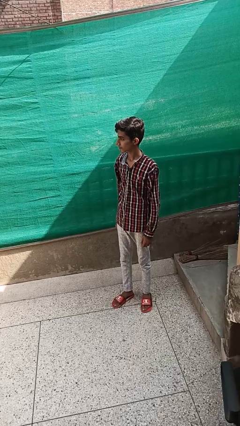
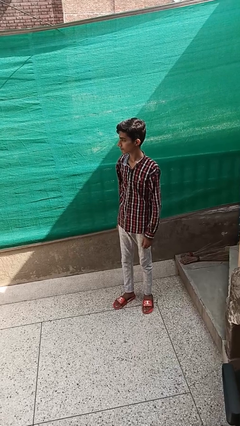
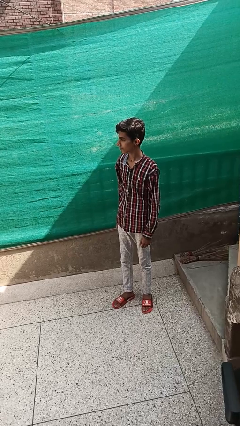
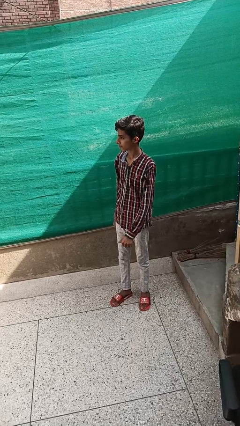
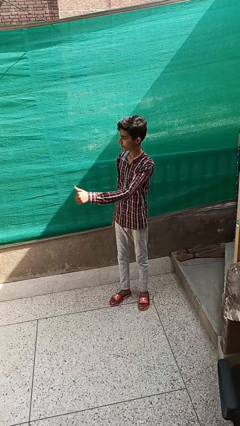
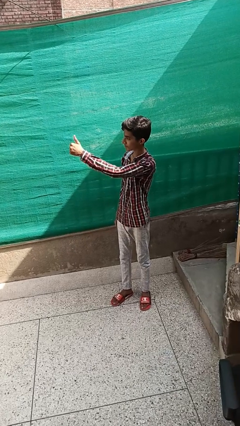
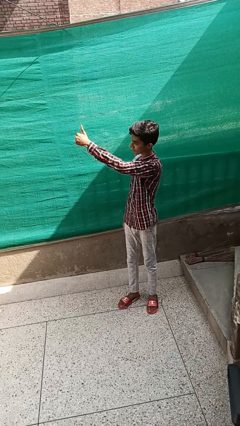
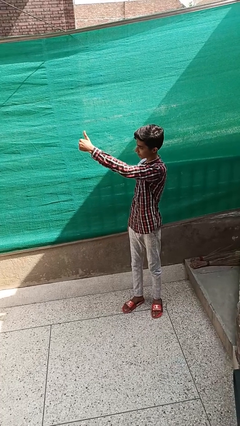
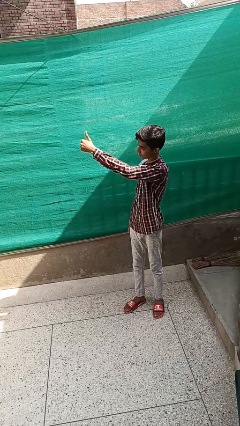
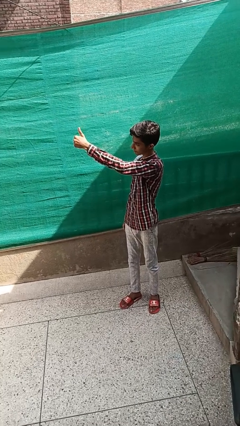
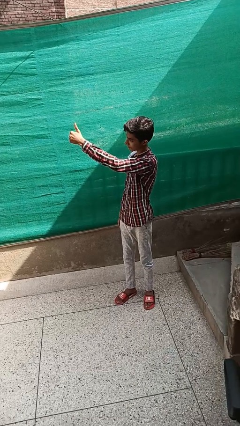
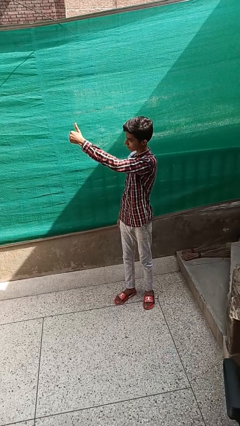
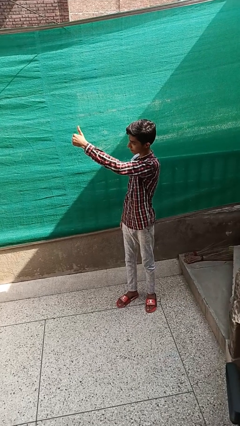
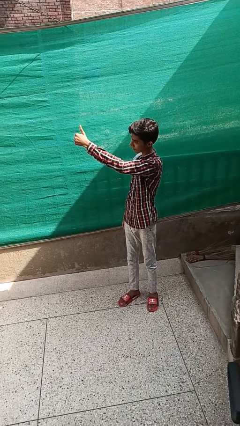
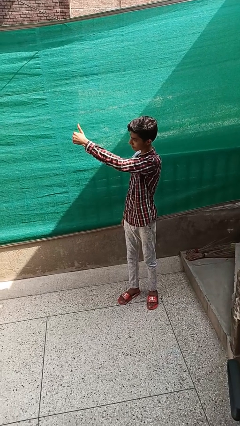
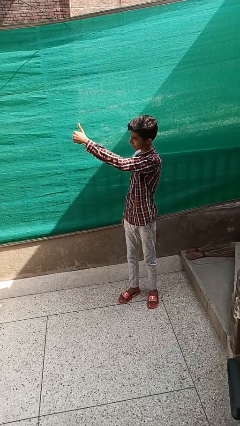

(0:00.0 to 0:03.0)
person gestures thumbs up

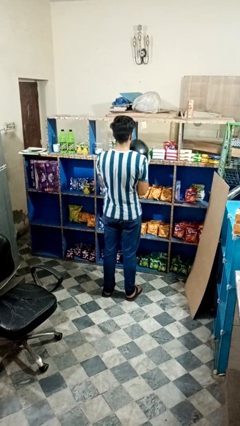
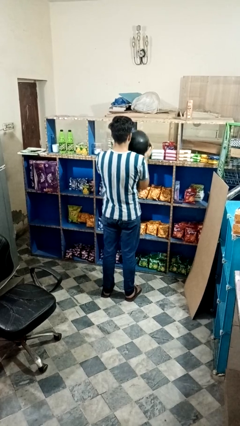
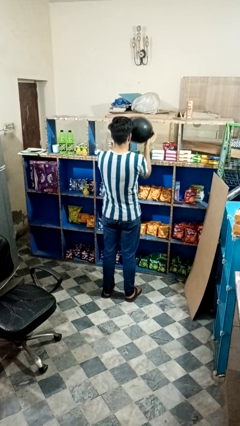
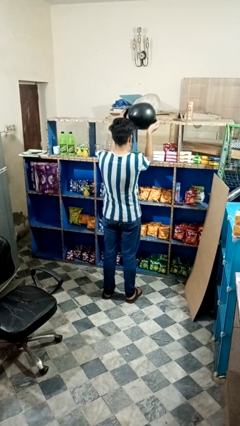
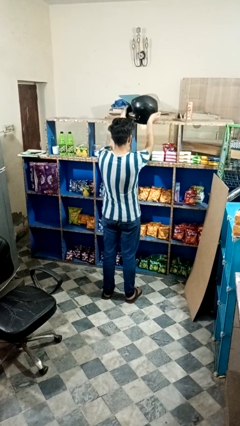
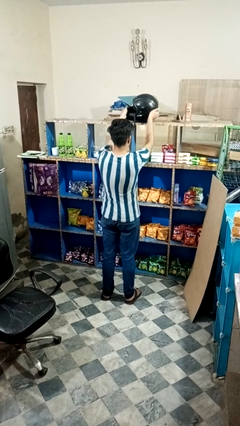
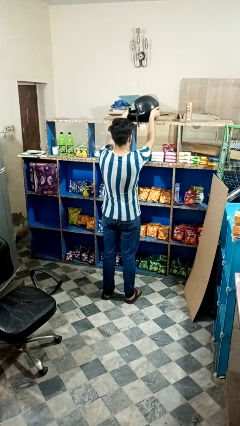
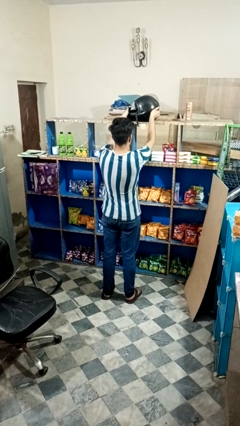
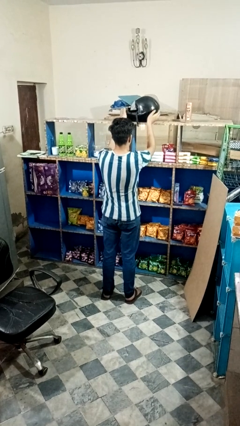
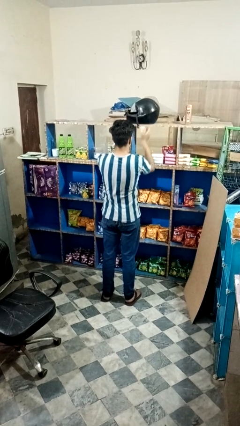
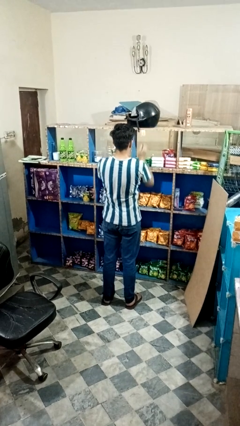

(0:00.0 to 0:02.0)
person puts down object on countertop

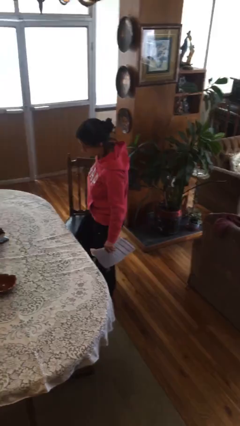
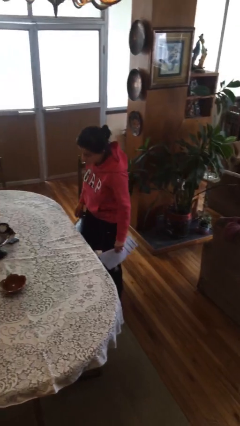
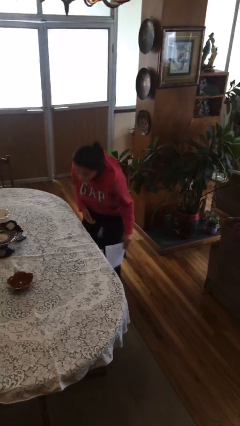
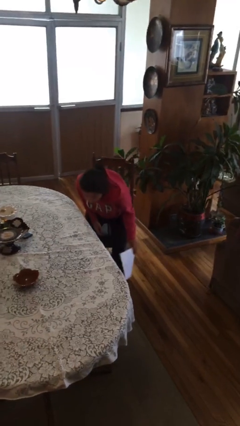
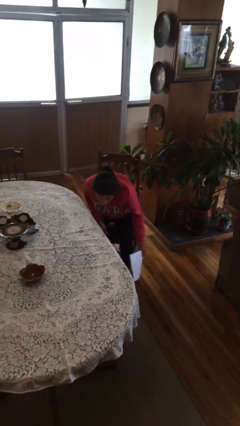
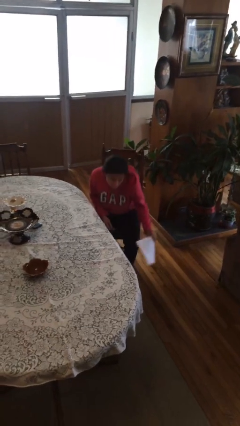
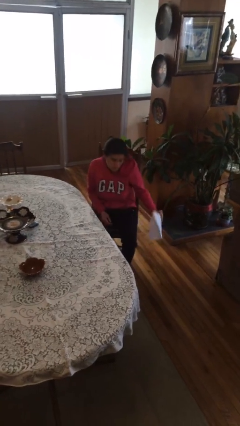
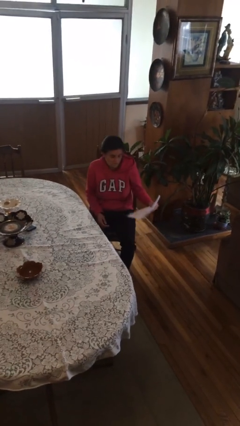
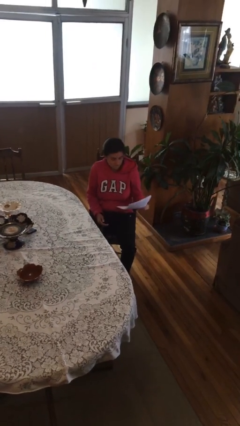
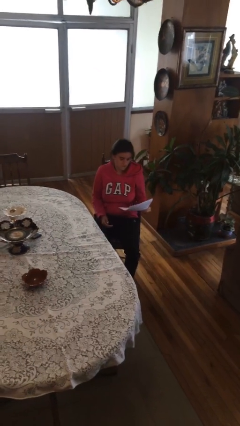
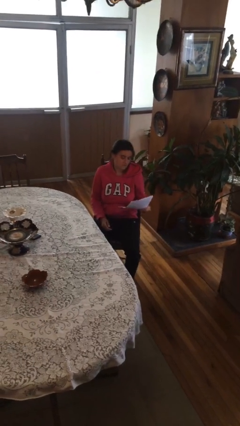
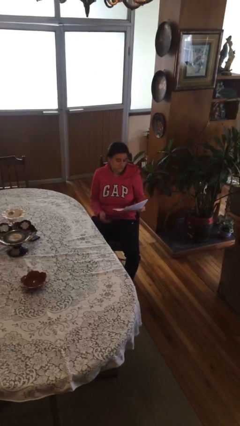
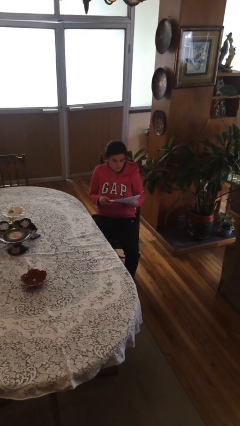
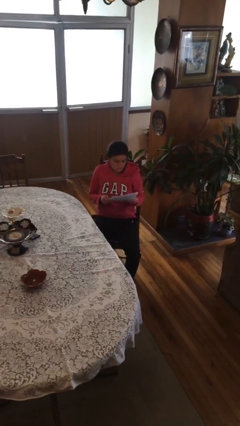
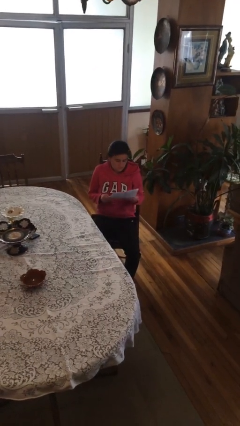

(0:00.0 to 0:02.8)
person sits down

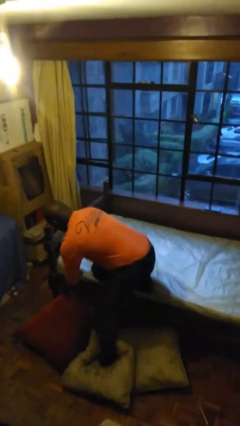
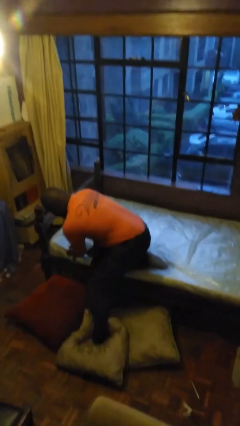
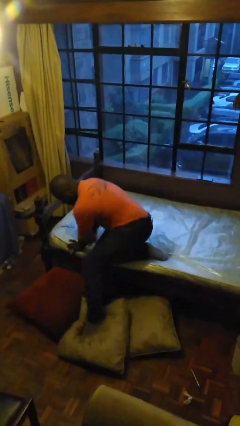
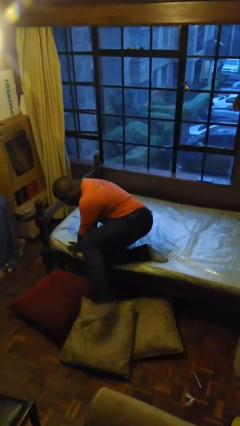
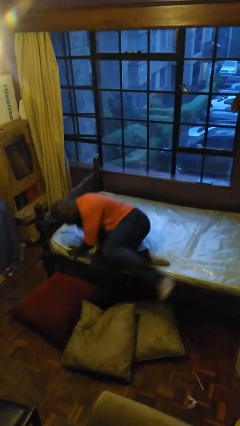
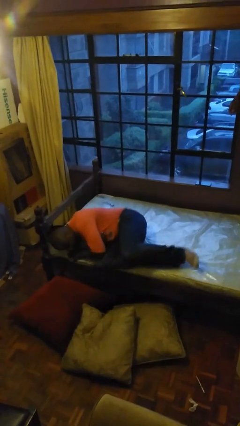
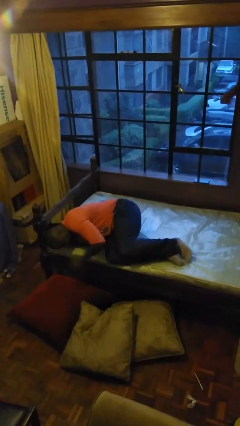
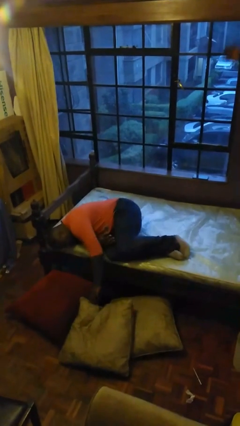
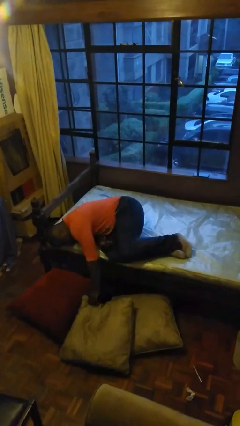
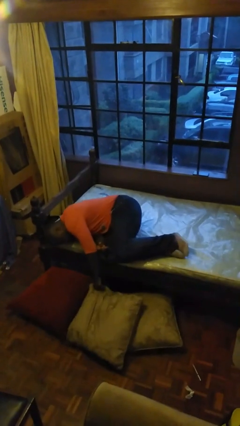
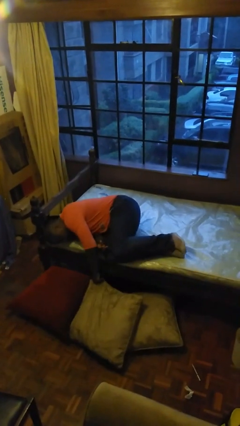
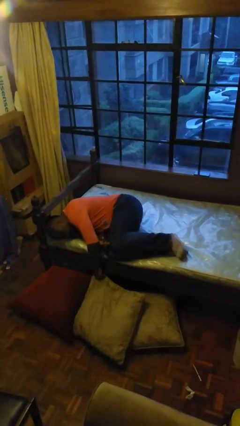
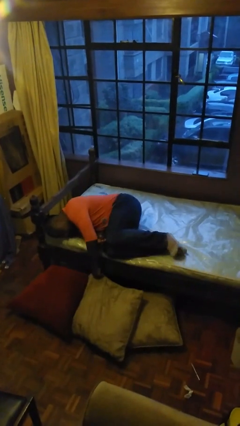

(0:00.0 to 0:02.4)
person lies down on bed

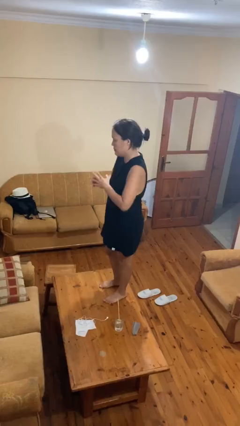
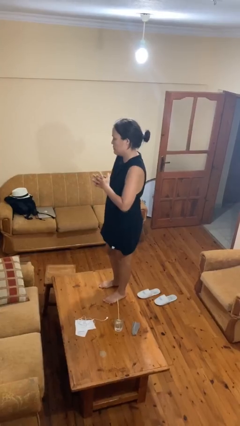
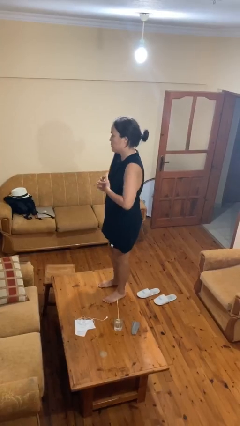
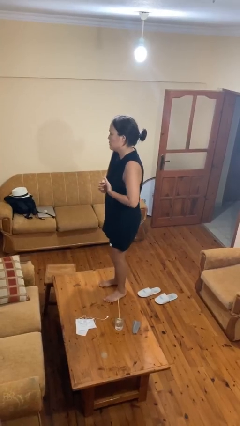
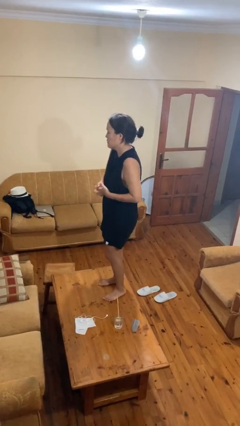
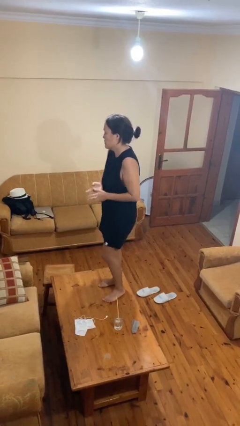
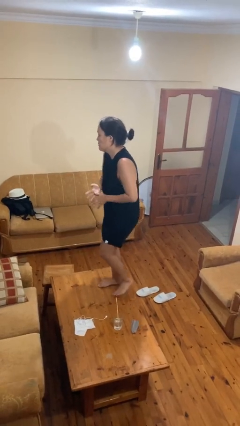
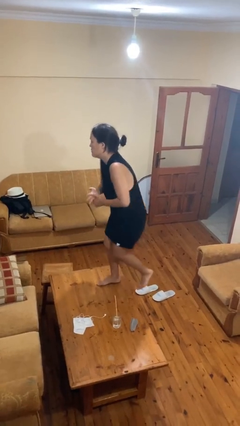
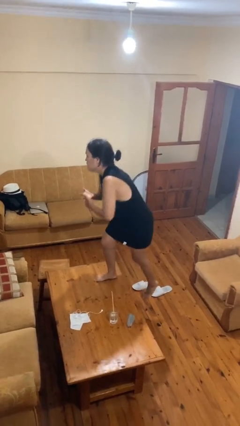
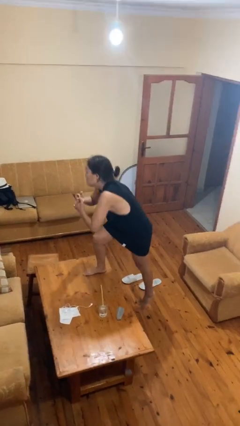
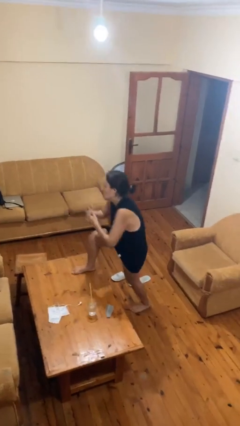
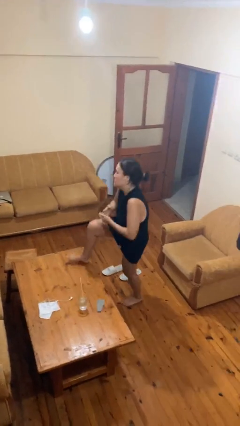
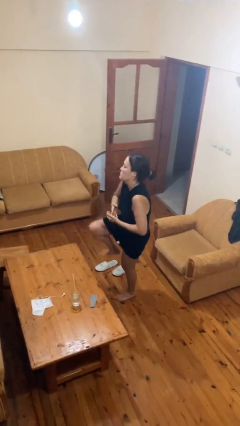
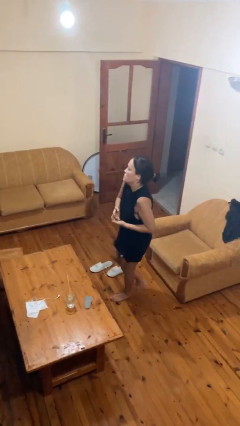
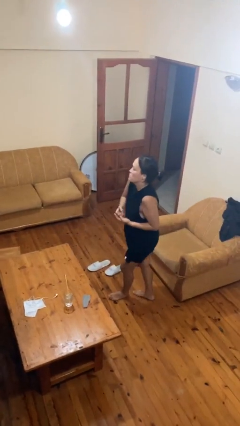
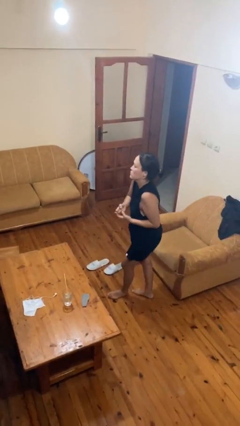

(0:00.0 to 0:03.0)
person climbs off table

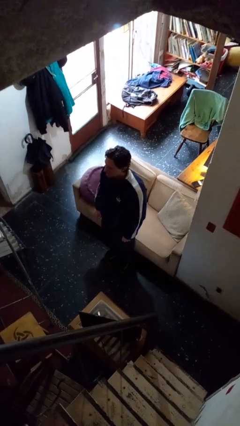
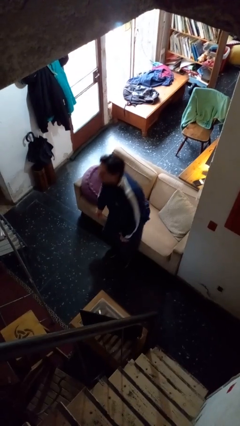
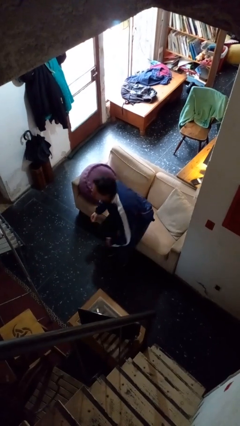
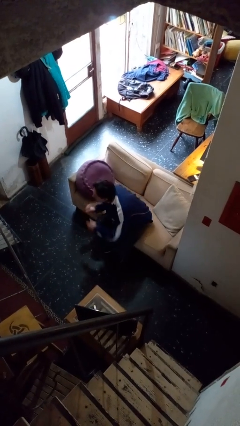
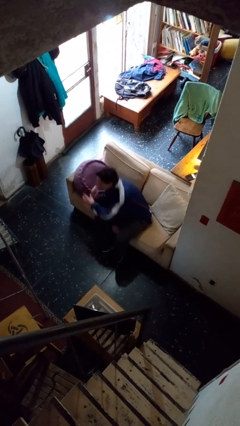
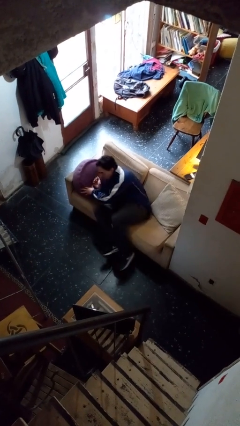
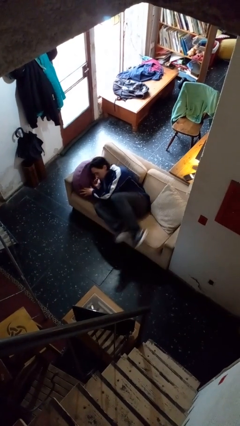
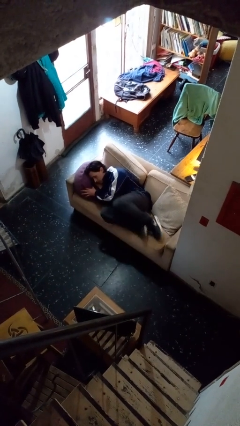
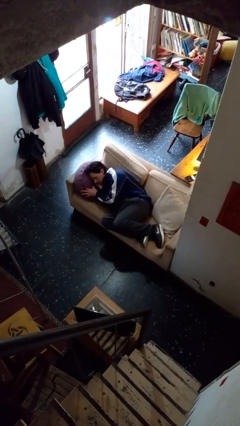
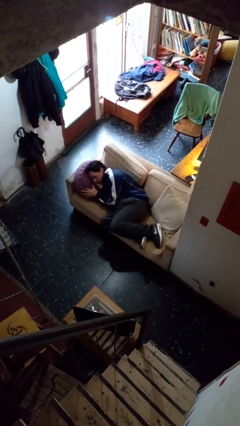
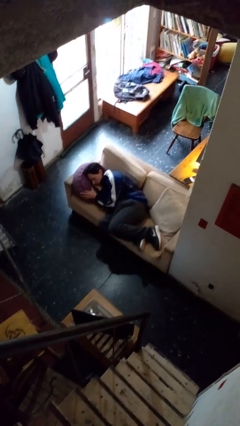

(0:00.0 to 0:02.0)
person lies down on couch

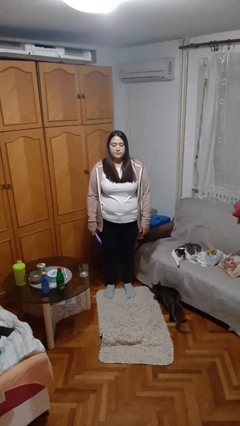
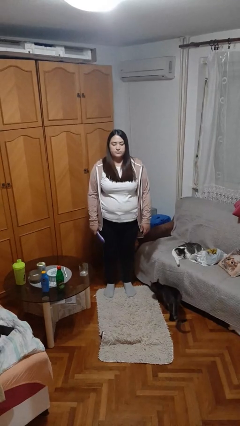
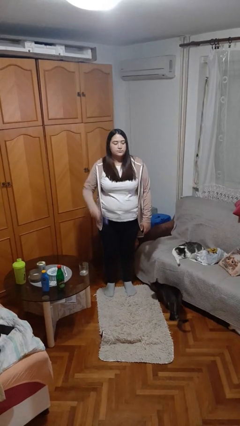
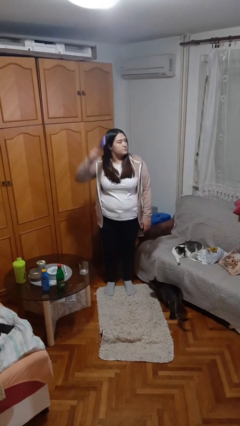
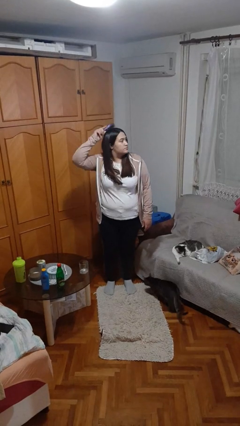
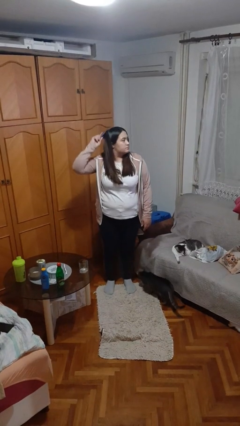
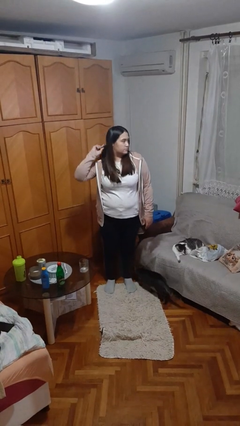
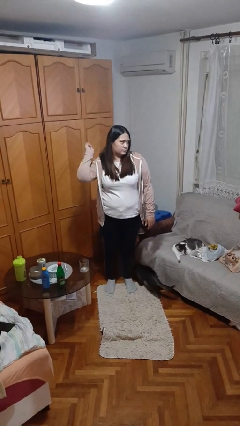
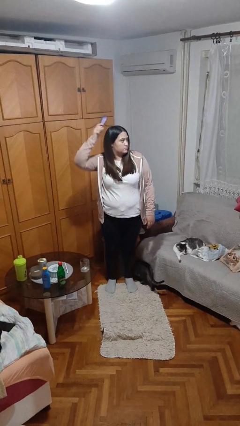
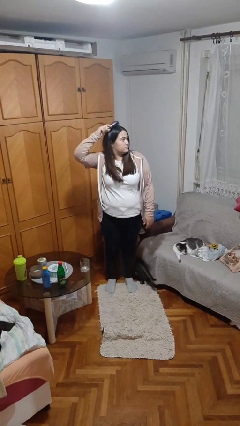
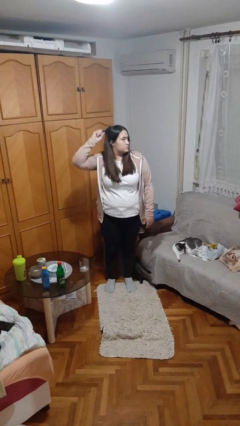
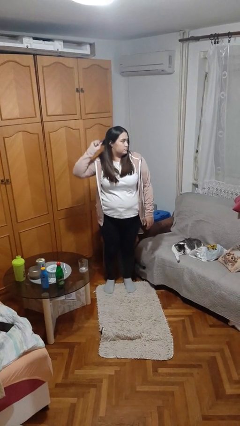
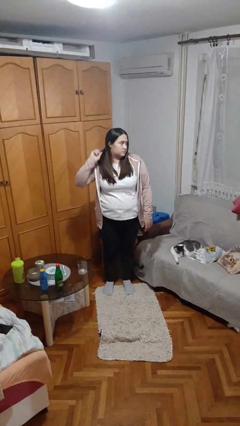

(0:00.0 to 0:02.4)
person brushes hair
